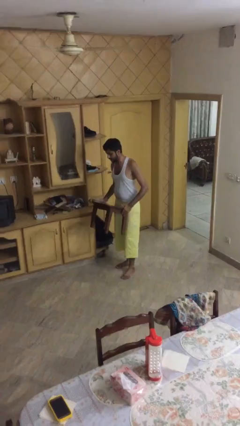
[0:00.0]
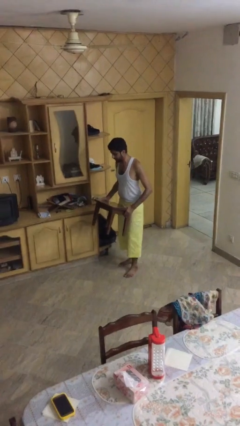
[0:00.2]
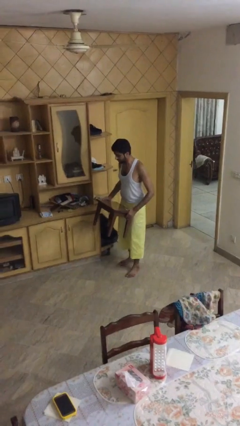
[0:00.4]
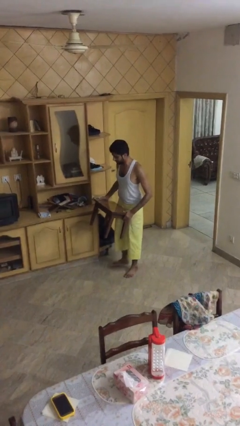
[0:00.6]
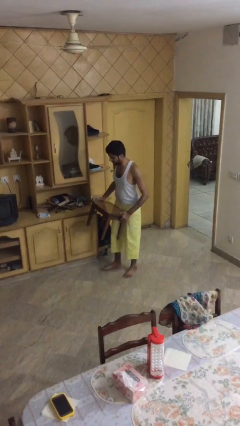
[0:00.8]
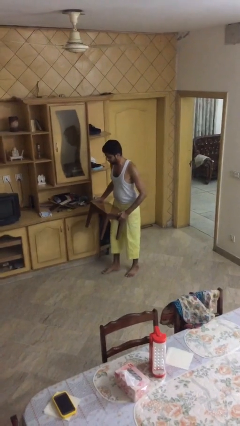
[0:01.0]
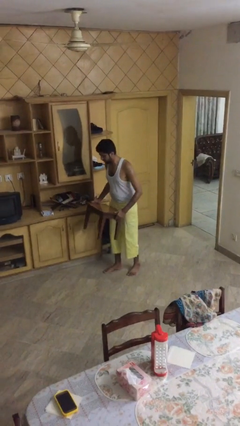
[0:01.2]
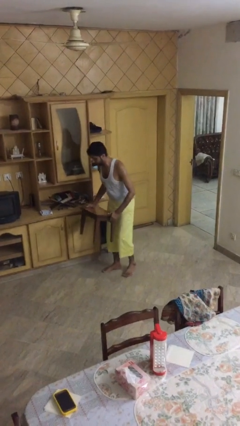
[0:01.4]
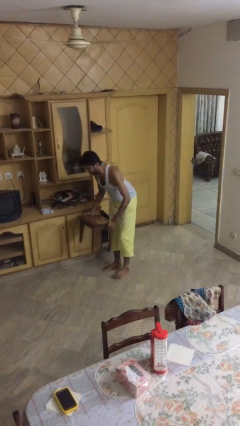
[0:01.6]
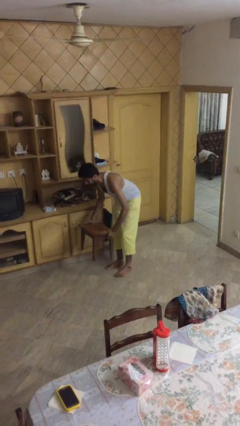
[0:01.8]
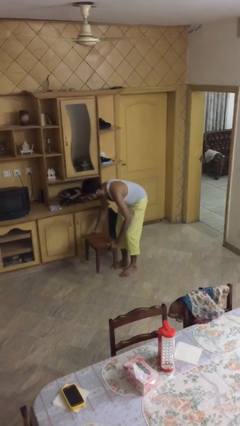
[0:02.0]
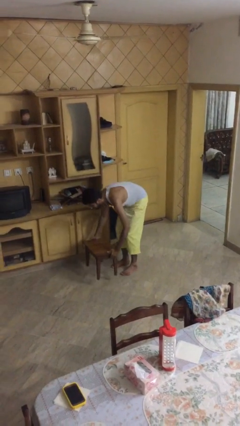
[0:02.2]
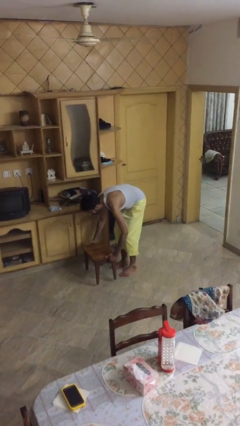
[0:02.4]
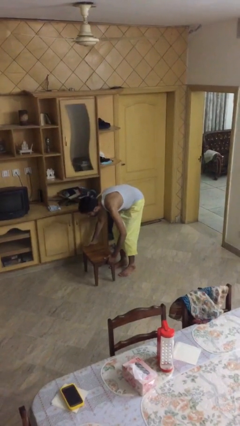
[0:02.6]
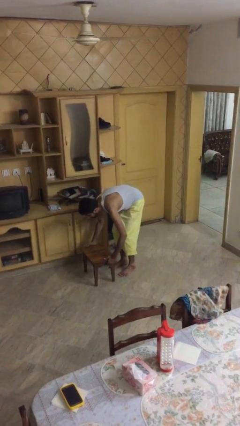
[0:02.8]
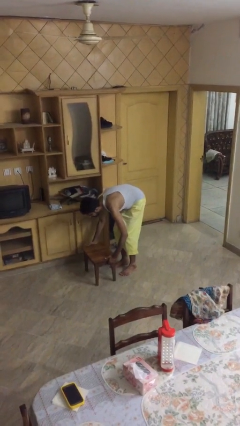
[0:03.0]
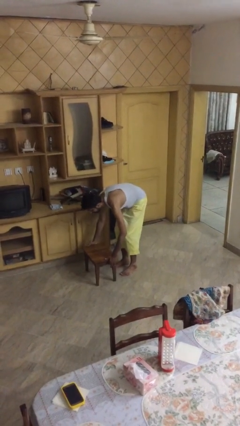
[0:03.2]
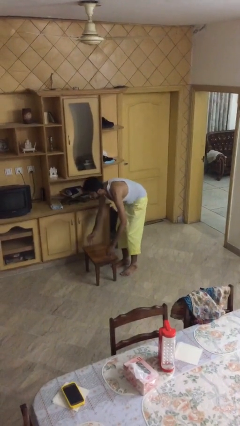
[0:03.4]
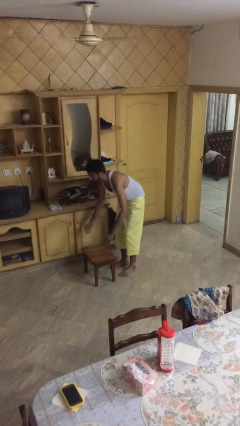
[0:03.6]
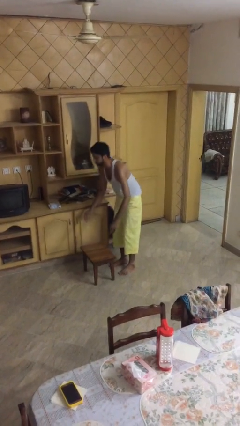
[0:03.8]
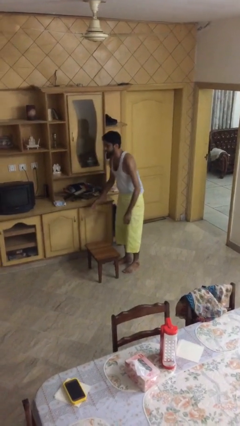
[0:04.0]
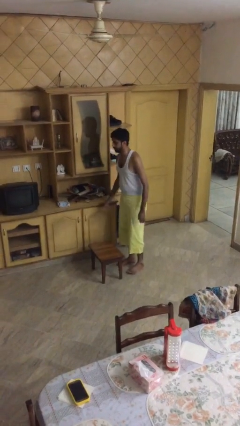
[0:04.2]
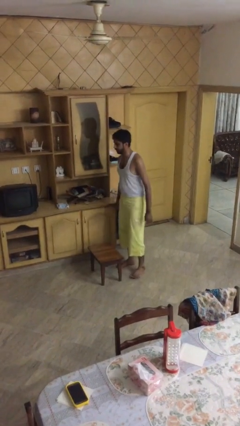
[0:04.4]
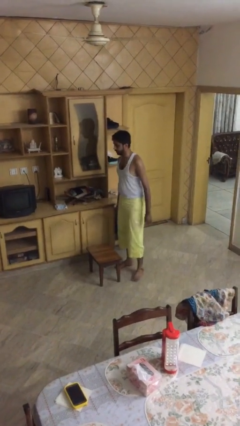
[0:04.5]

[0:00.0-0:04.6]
person puts down object on floor

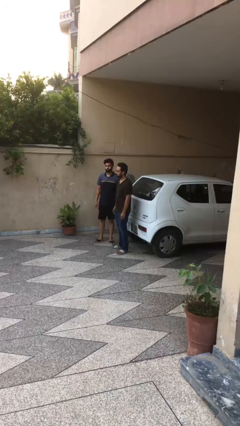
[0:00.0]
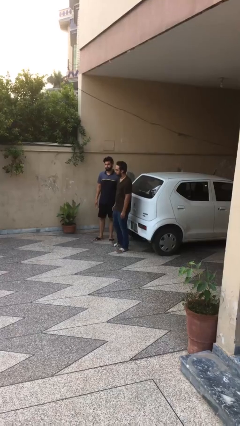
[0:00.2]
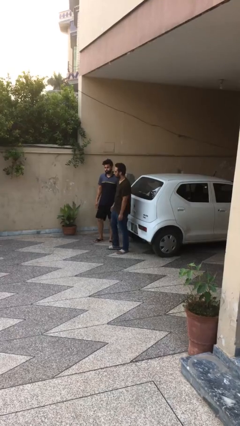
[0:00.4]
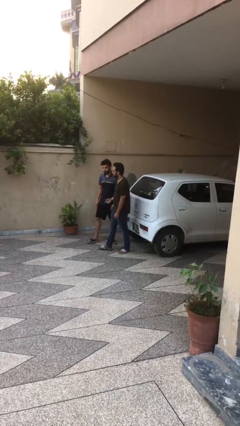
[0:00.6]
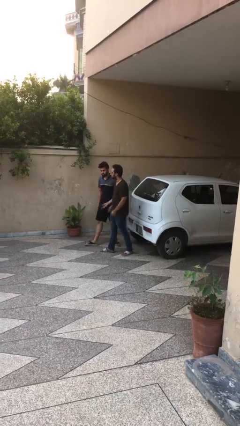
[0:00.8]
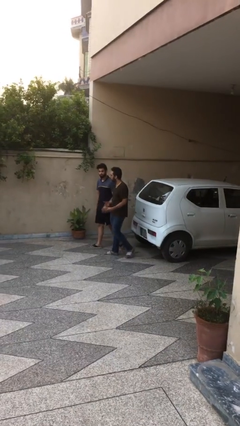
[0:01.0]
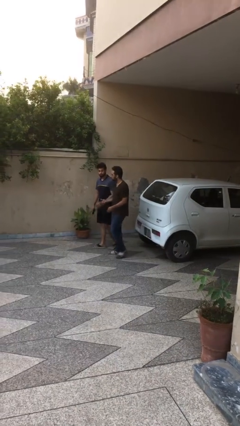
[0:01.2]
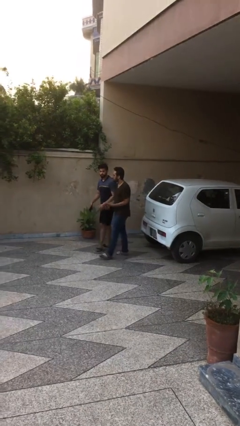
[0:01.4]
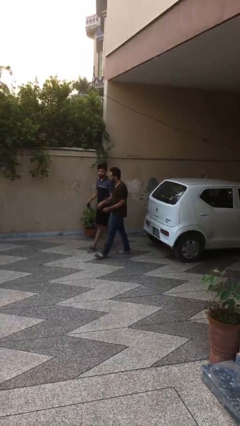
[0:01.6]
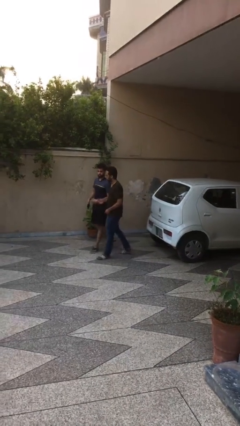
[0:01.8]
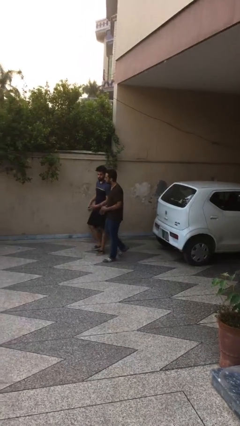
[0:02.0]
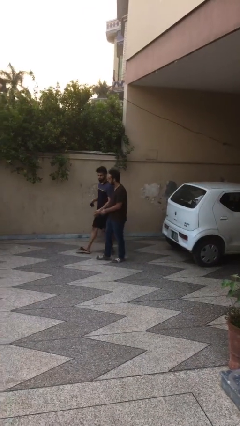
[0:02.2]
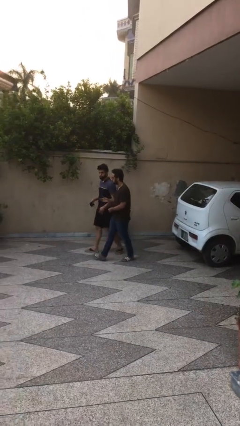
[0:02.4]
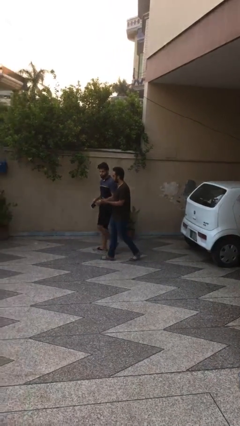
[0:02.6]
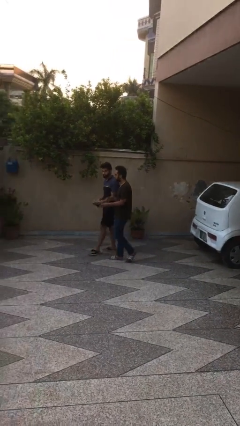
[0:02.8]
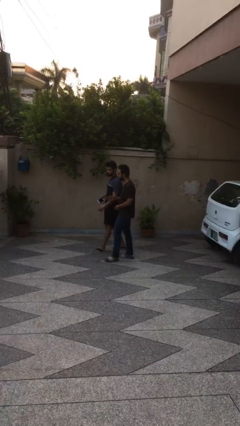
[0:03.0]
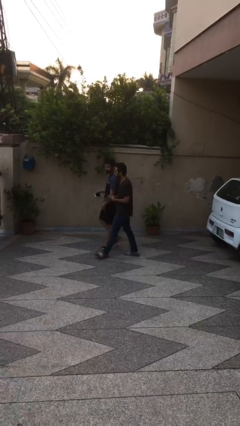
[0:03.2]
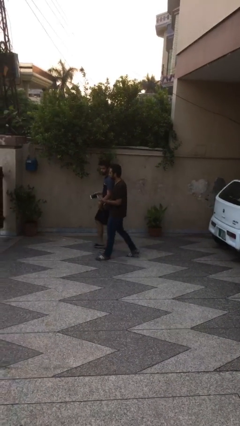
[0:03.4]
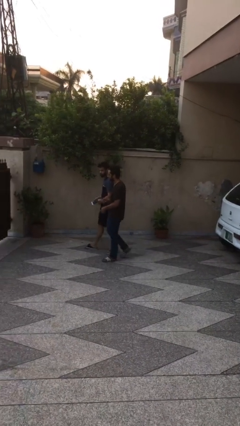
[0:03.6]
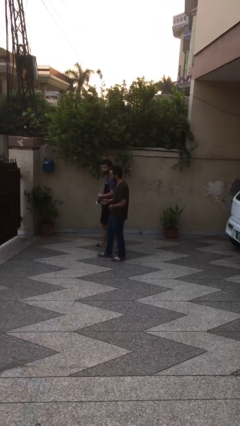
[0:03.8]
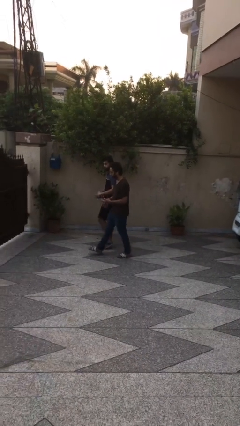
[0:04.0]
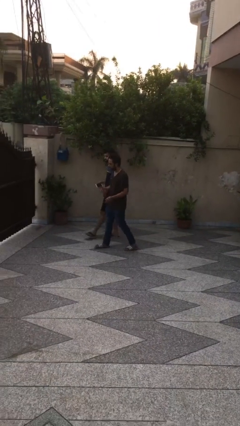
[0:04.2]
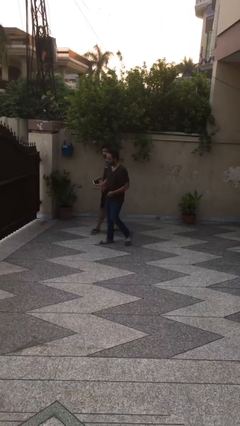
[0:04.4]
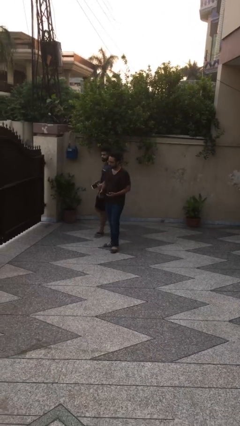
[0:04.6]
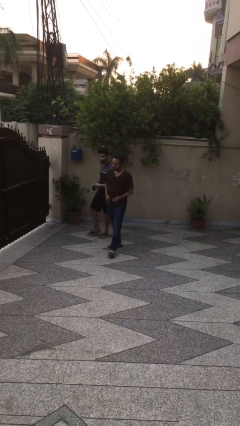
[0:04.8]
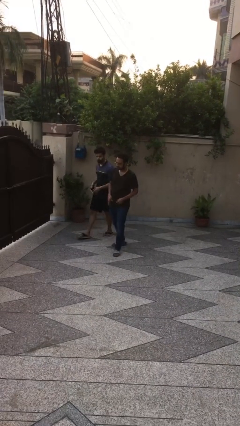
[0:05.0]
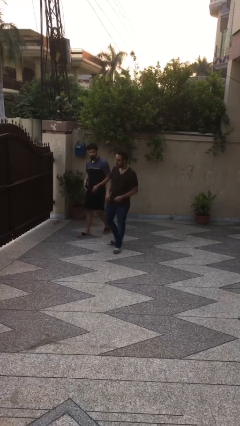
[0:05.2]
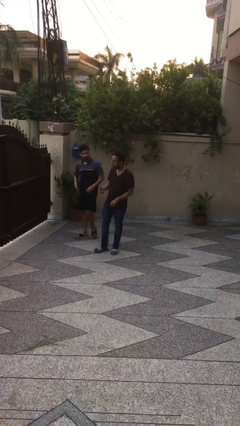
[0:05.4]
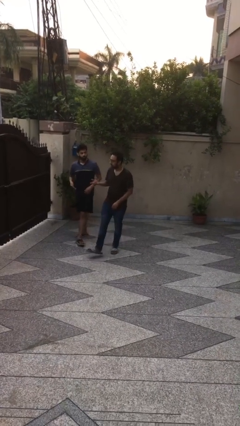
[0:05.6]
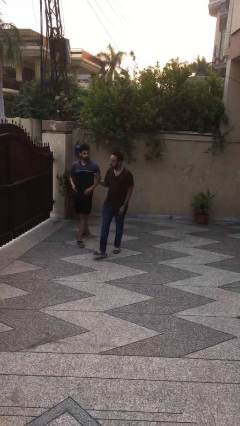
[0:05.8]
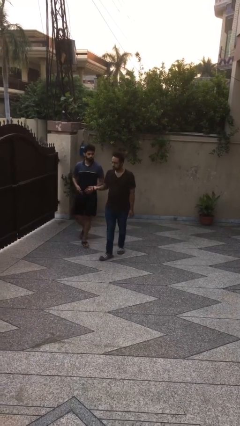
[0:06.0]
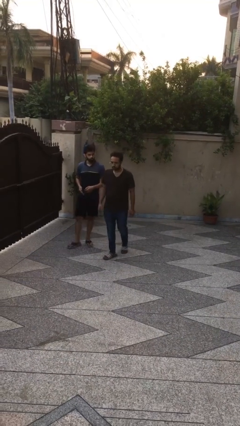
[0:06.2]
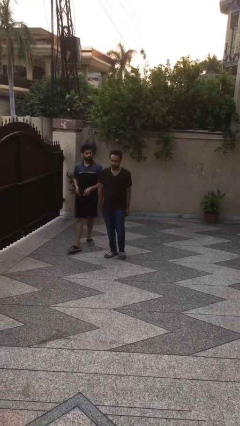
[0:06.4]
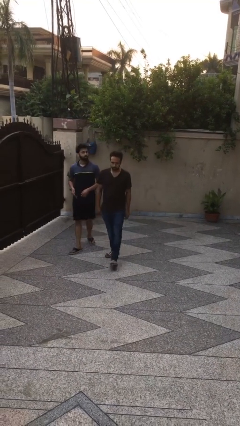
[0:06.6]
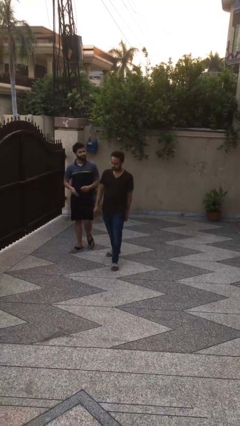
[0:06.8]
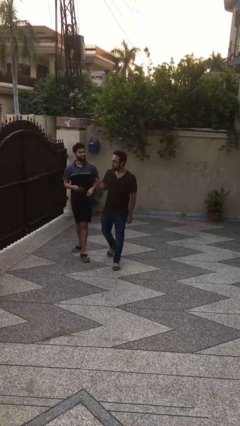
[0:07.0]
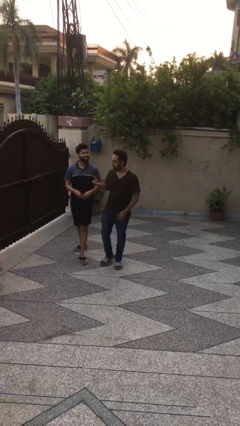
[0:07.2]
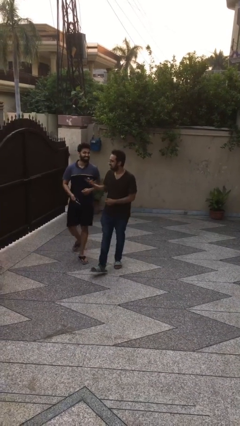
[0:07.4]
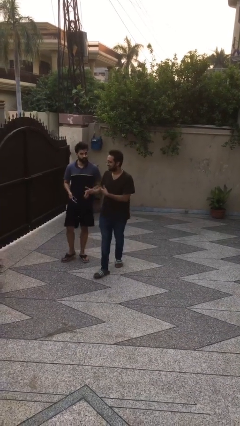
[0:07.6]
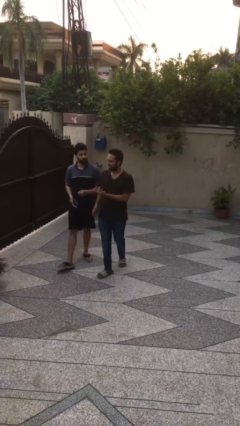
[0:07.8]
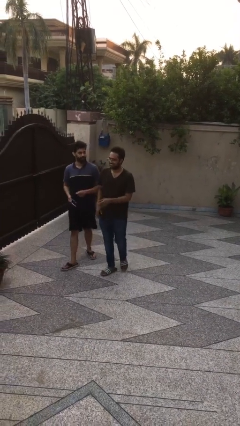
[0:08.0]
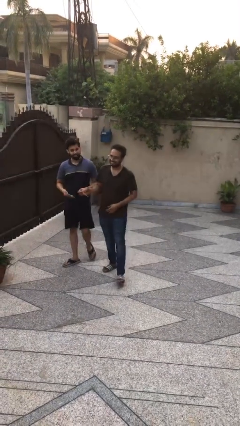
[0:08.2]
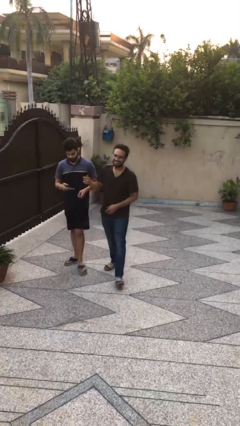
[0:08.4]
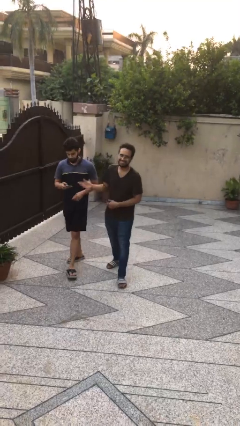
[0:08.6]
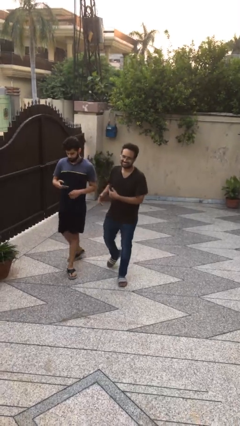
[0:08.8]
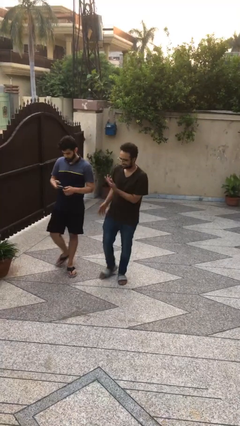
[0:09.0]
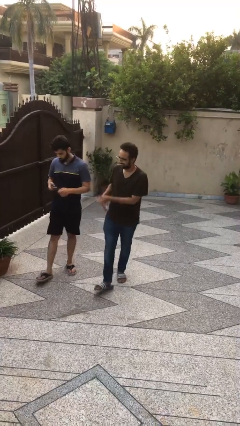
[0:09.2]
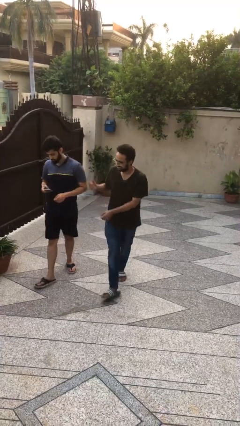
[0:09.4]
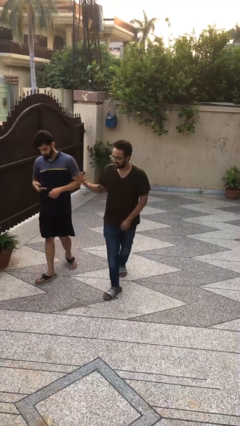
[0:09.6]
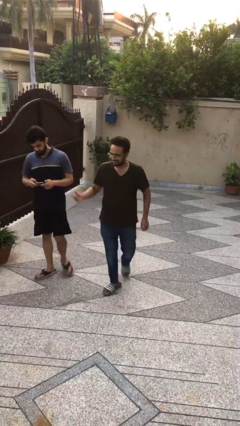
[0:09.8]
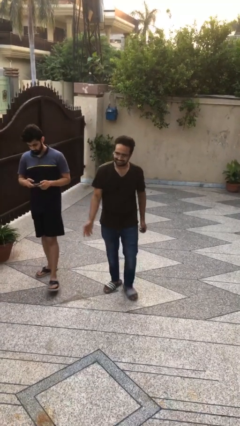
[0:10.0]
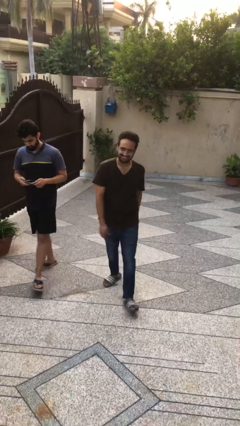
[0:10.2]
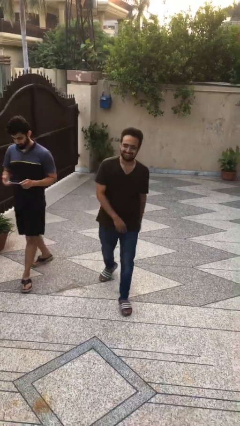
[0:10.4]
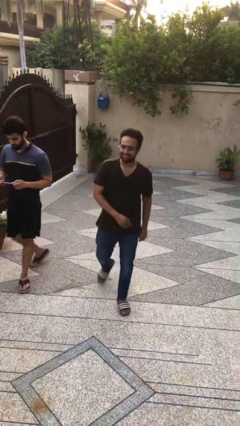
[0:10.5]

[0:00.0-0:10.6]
person talks to person

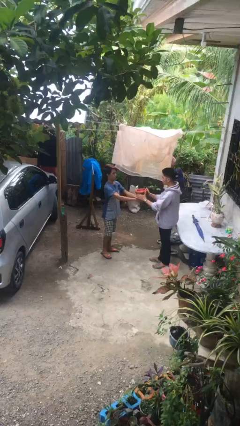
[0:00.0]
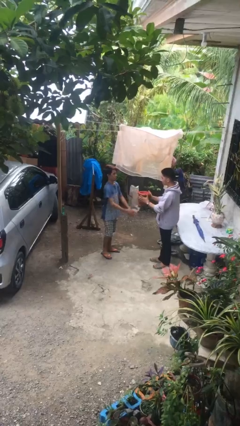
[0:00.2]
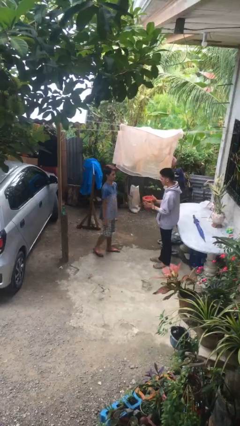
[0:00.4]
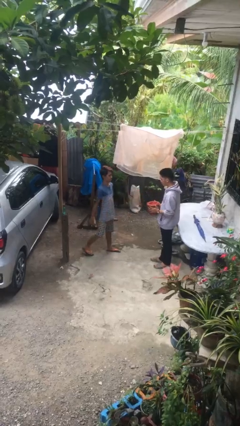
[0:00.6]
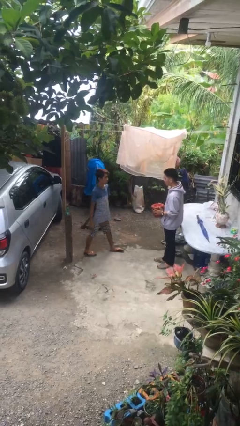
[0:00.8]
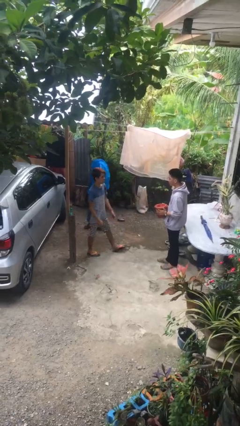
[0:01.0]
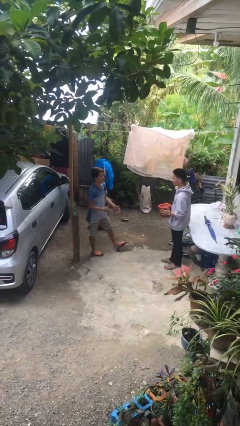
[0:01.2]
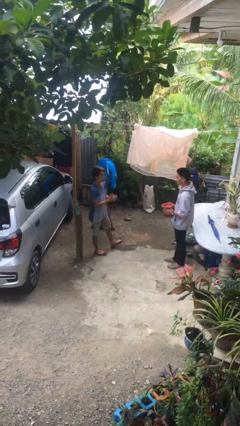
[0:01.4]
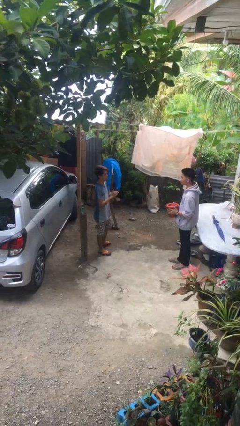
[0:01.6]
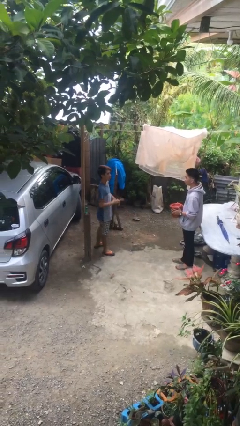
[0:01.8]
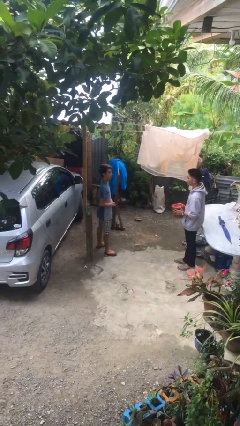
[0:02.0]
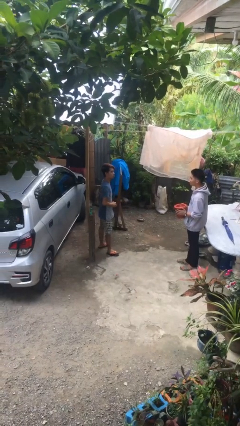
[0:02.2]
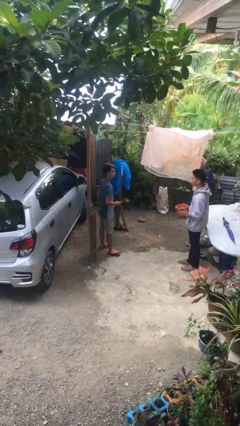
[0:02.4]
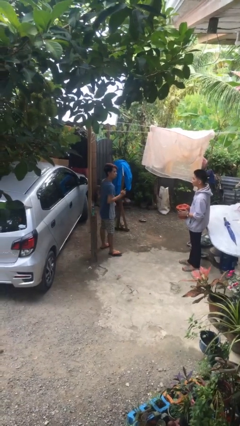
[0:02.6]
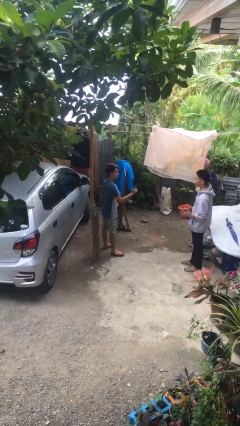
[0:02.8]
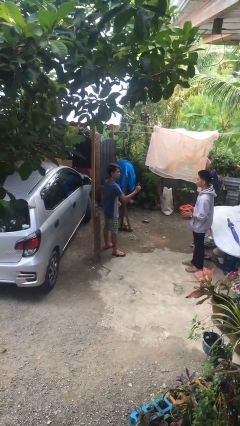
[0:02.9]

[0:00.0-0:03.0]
person transfers object to person
